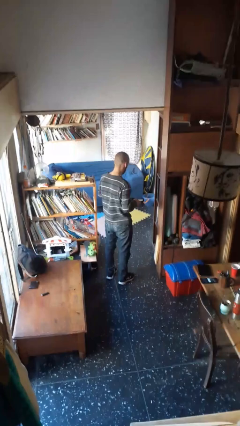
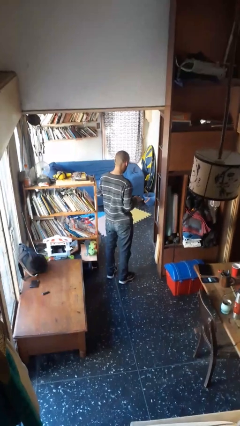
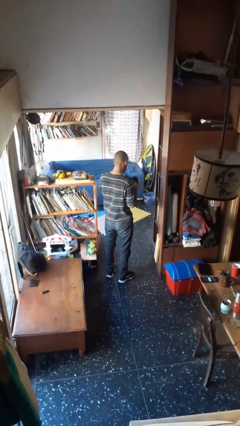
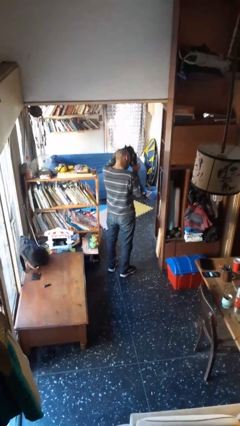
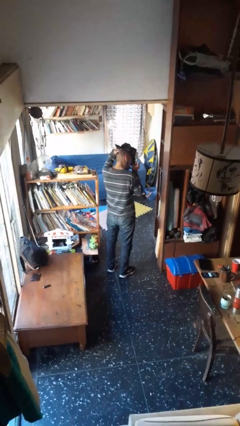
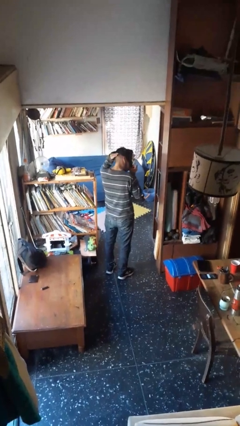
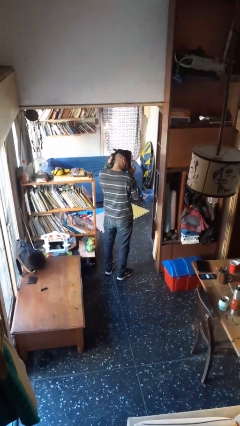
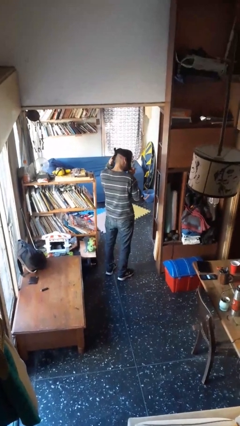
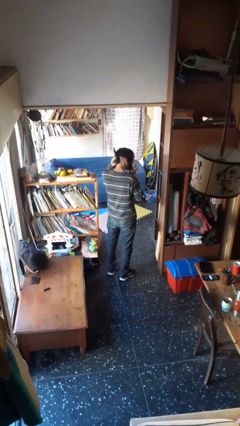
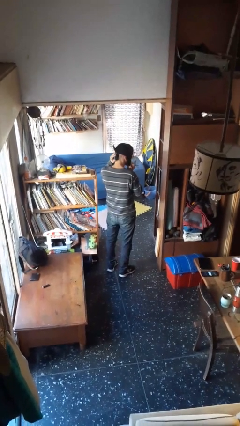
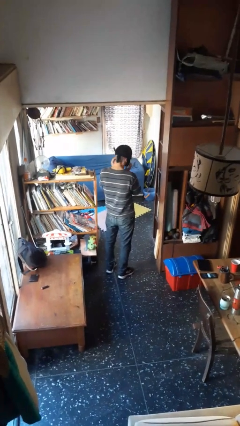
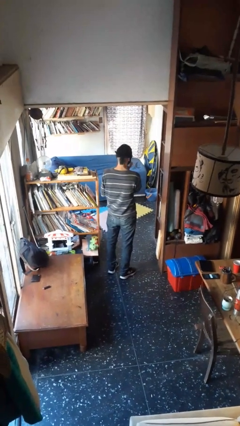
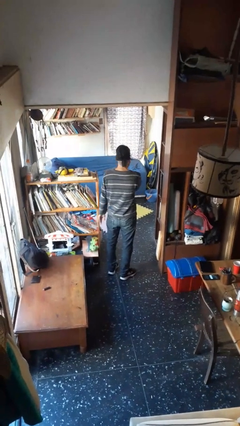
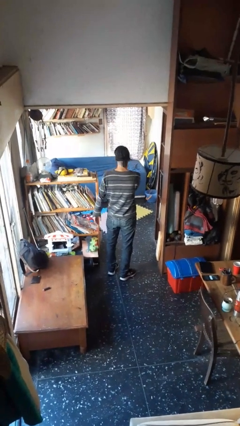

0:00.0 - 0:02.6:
person puts on facemask

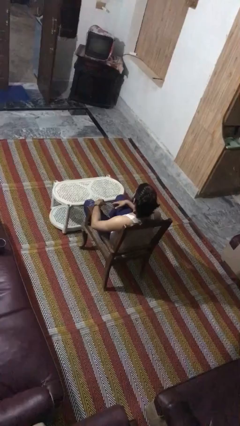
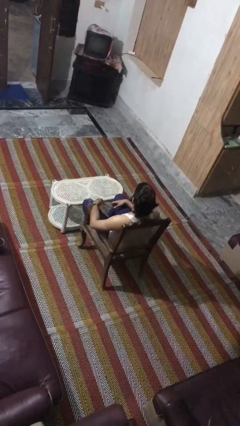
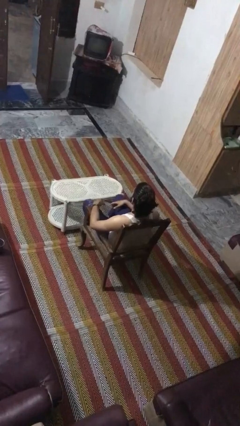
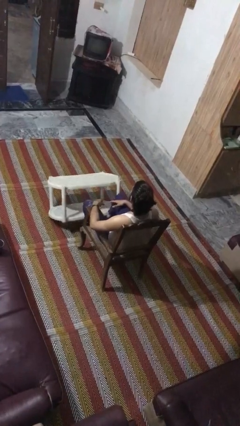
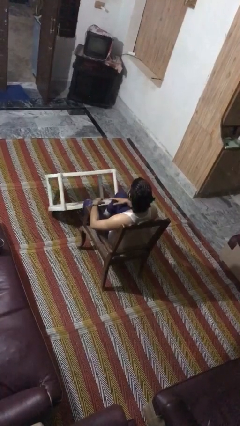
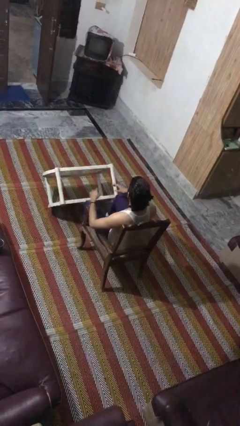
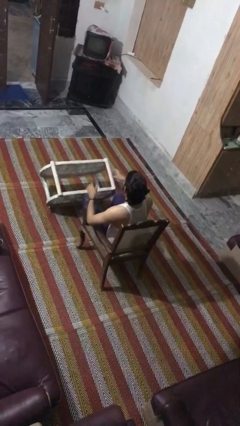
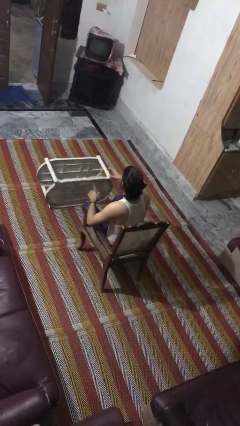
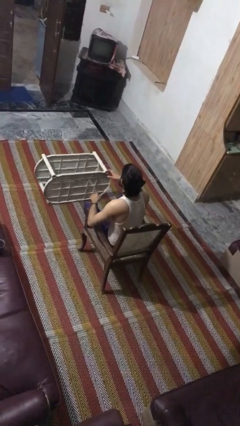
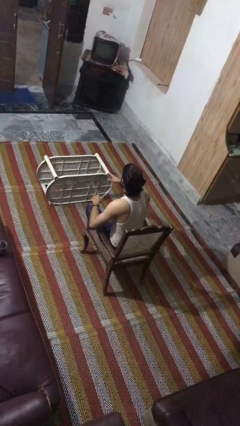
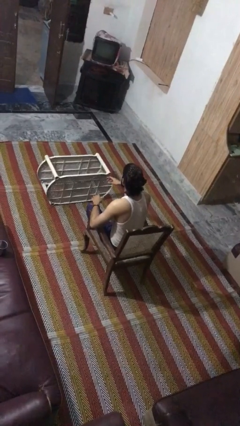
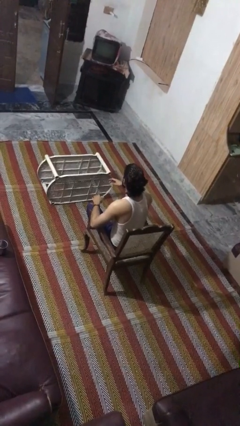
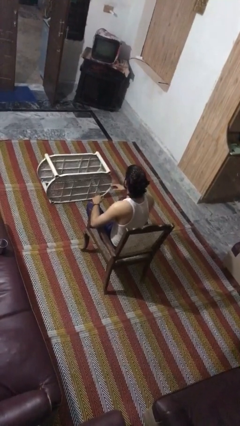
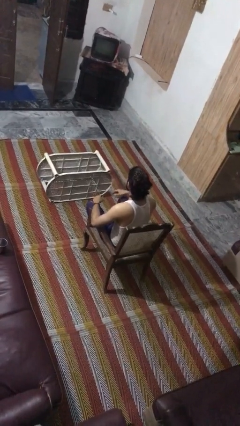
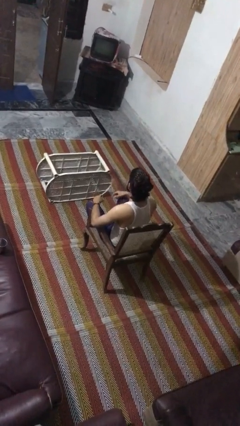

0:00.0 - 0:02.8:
person knocks over furniture

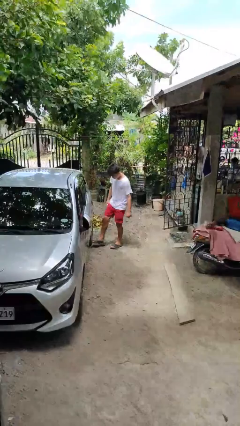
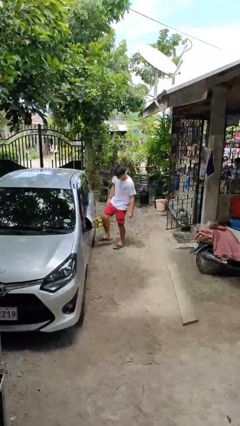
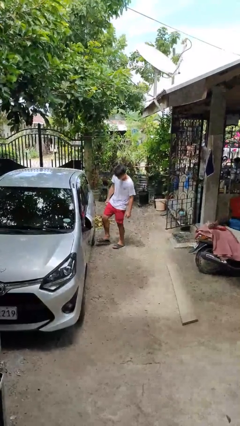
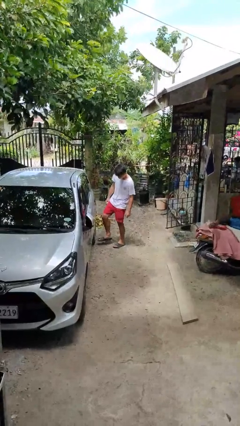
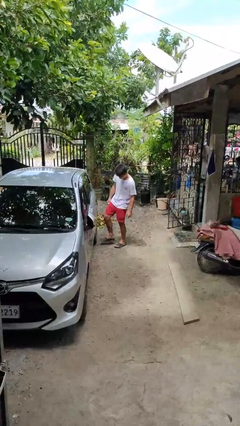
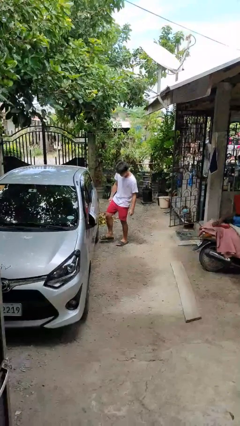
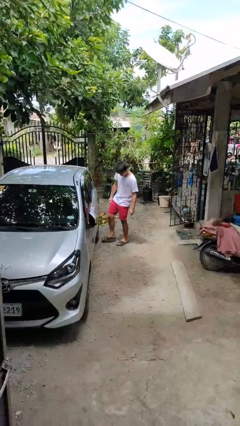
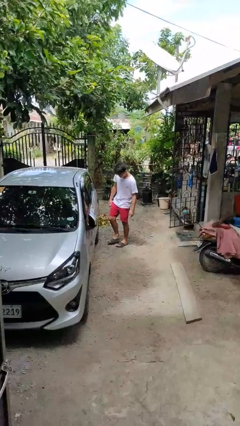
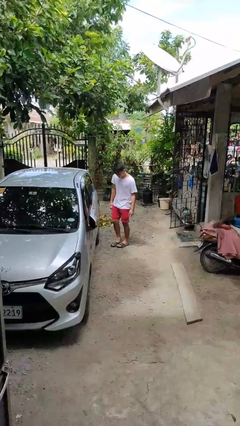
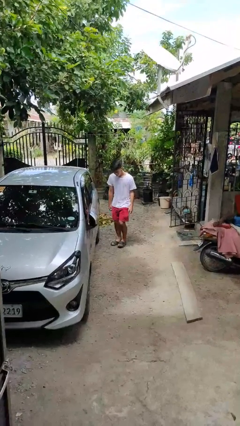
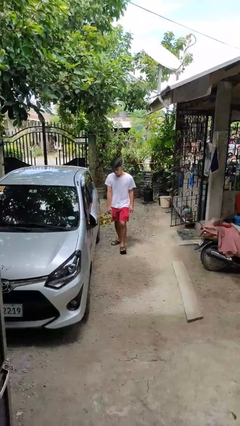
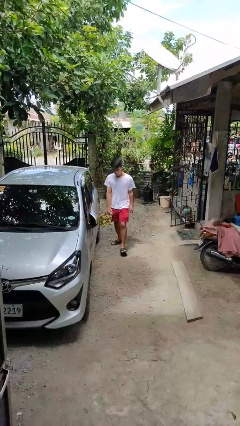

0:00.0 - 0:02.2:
person kicks car tires

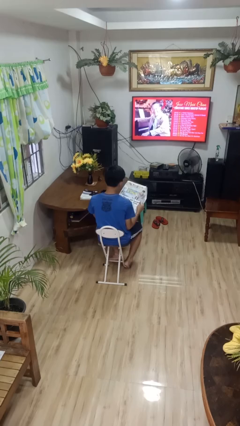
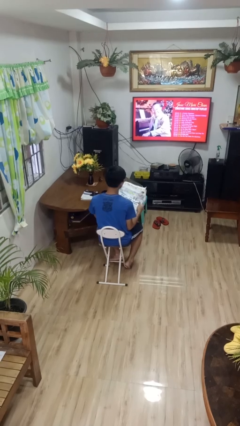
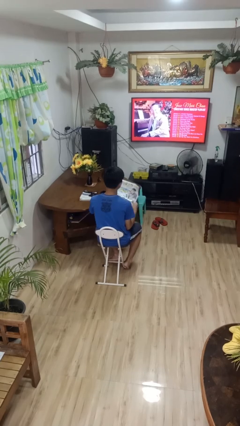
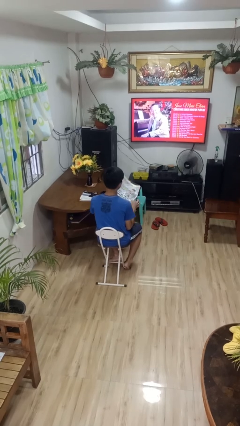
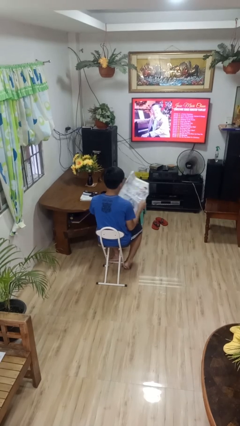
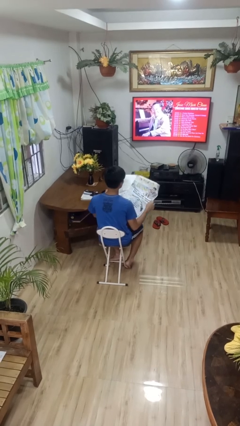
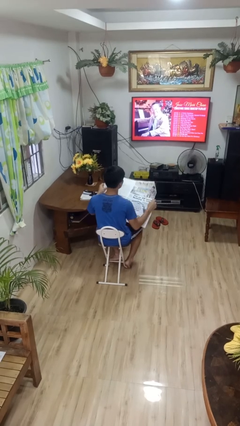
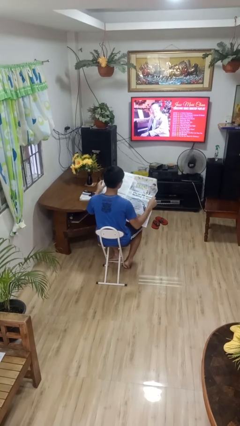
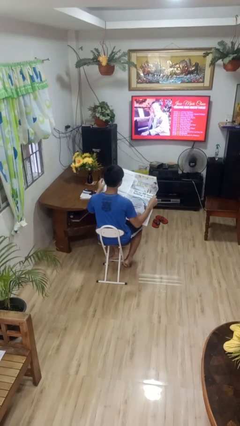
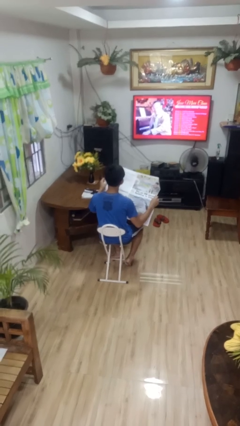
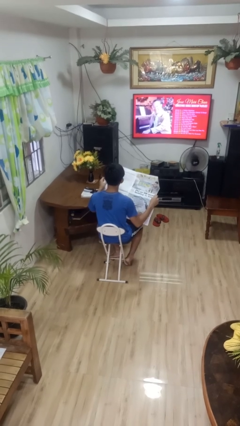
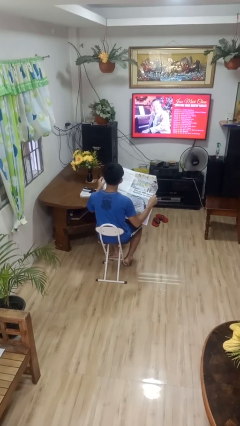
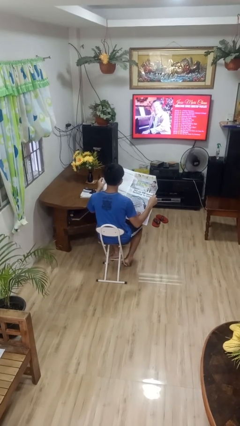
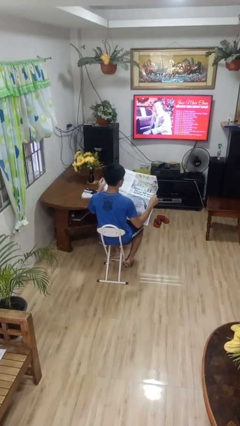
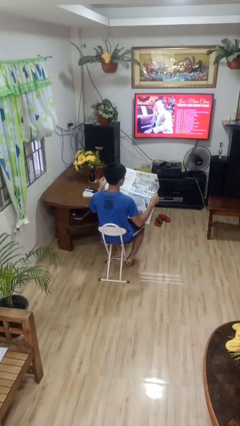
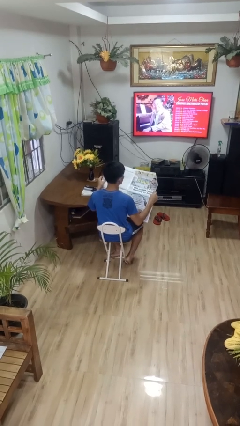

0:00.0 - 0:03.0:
person reads newspaper

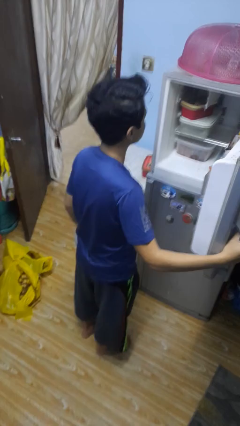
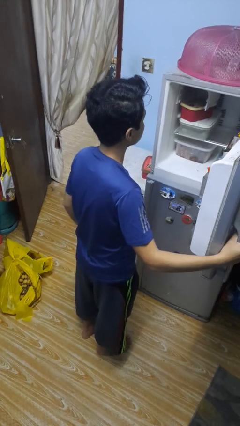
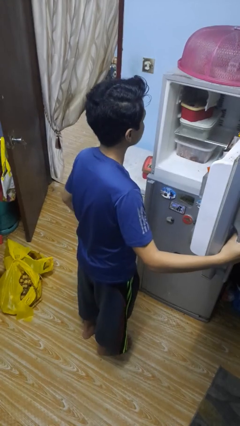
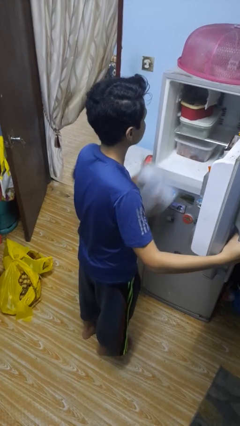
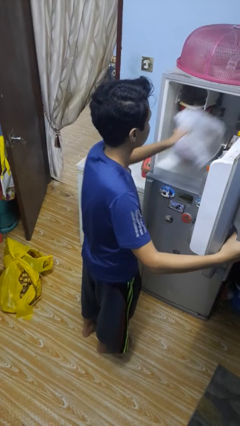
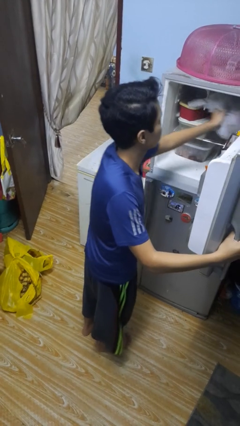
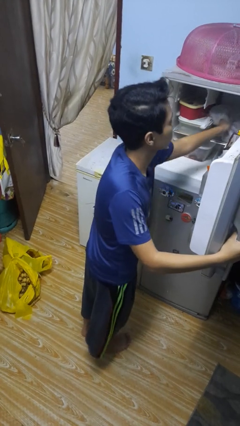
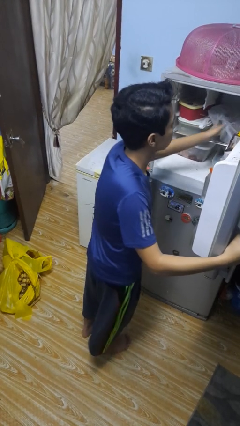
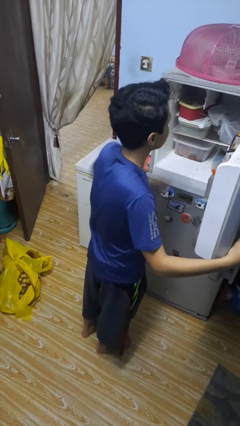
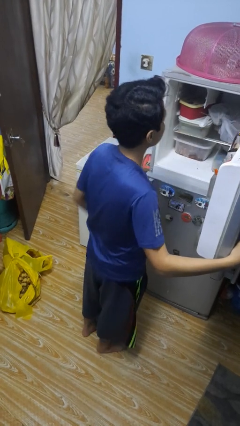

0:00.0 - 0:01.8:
person loads groceries into refrigerator

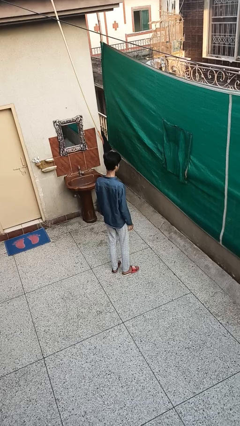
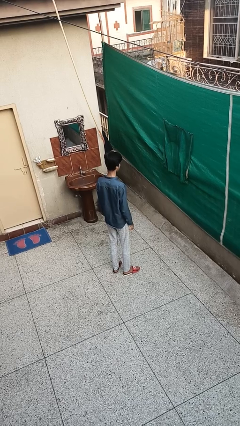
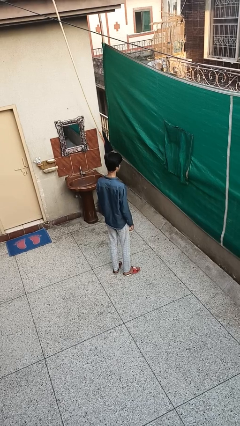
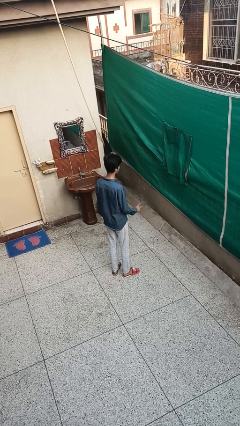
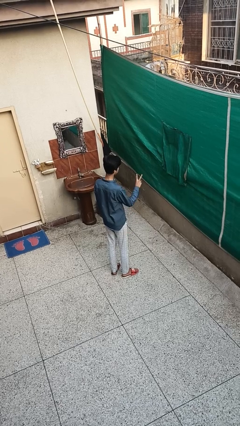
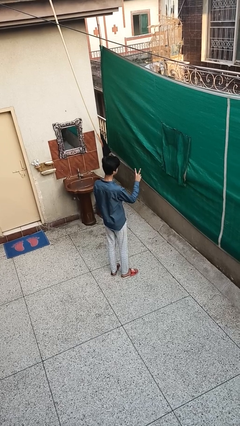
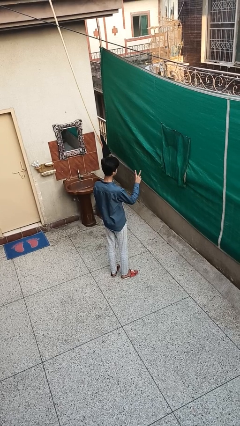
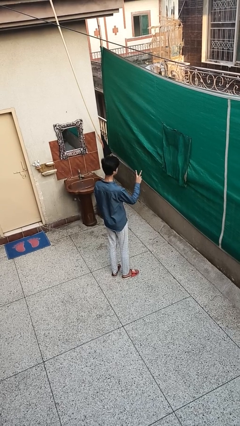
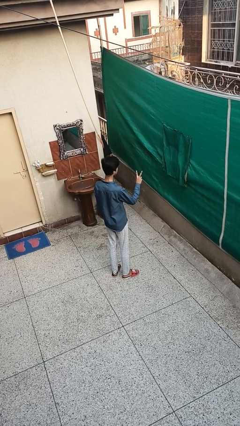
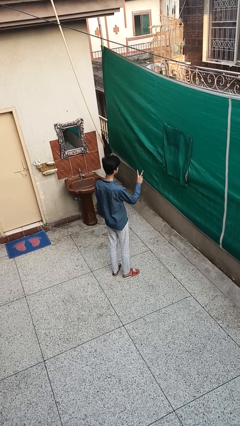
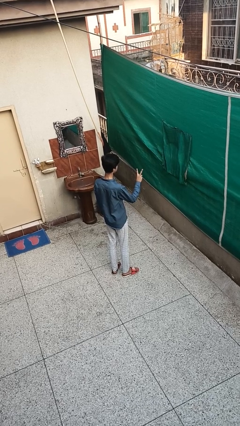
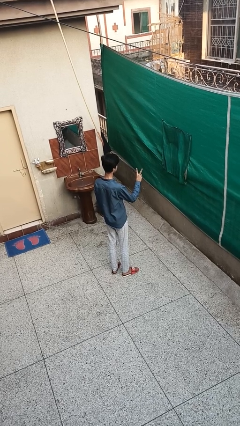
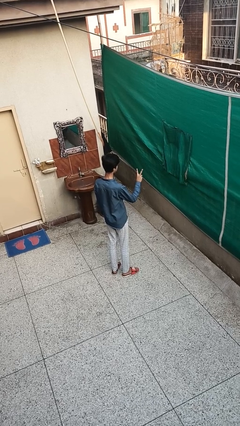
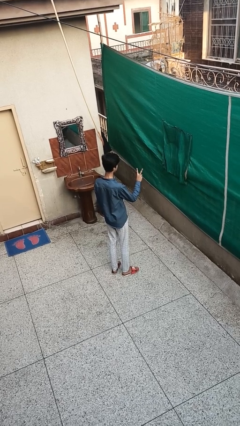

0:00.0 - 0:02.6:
person gestures peace

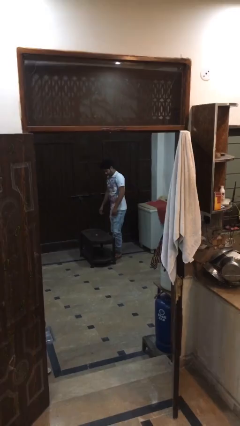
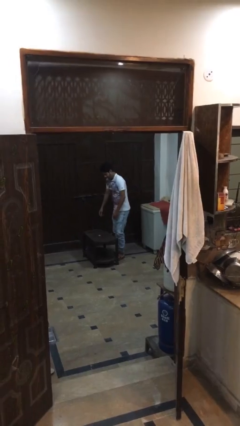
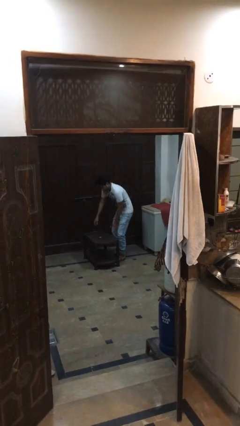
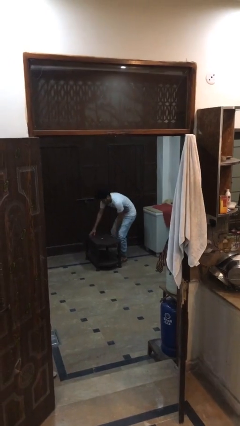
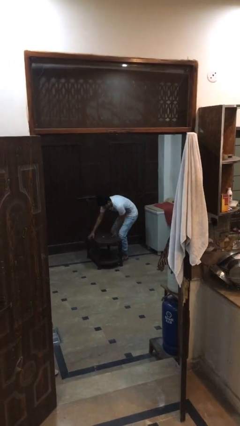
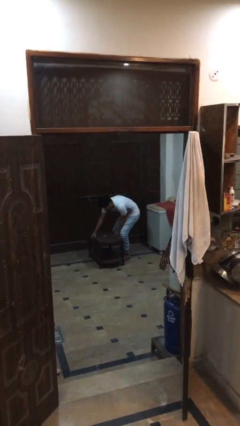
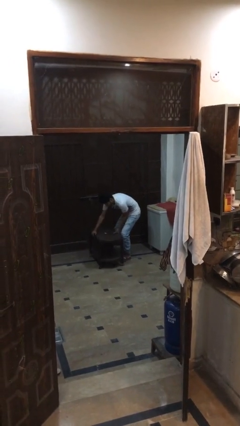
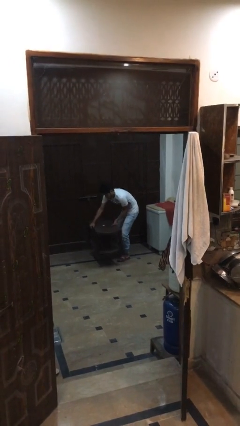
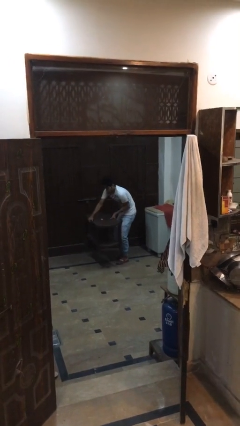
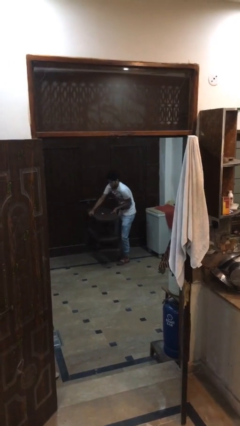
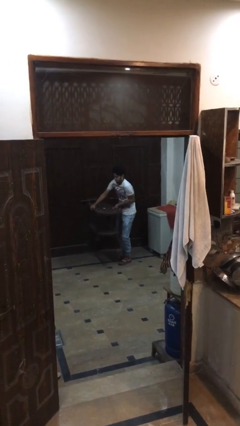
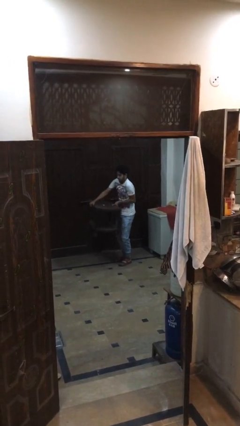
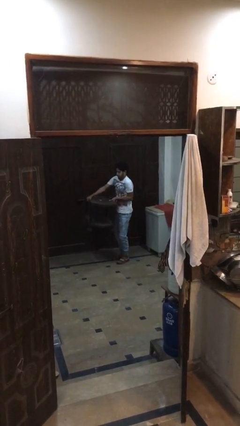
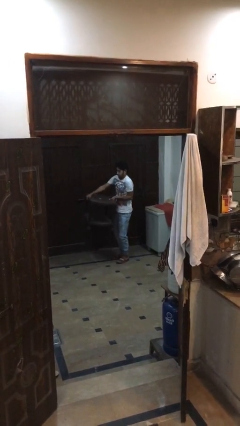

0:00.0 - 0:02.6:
person picks up object from floor
